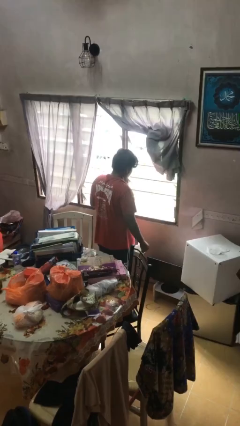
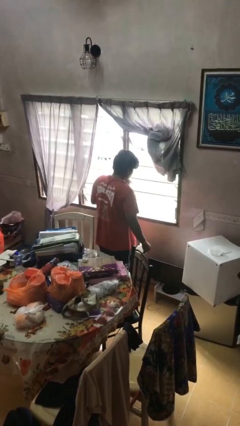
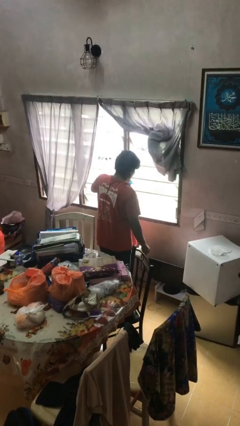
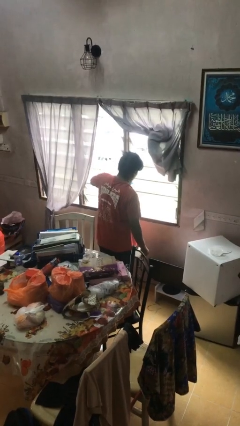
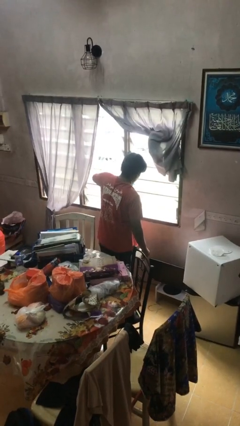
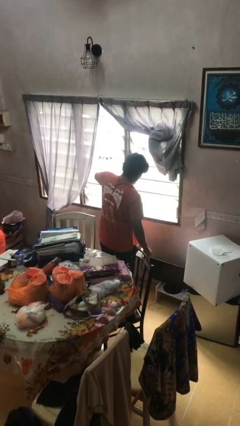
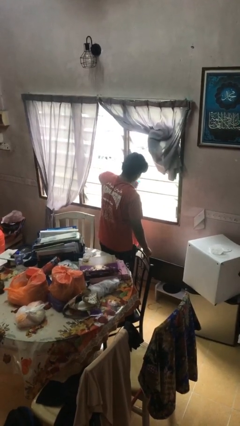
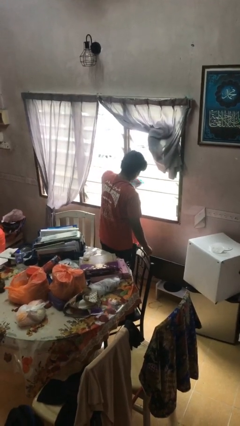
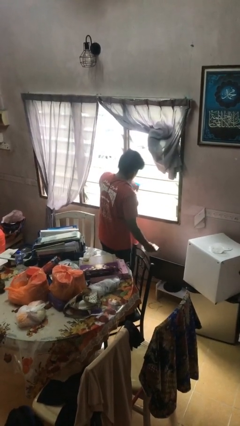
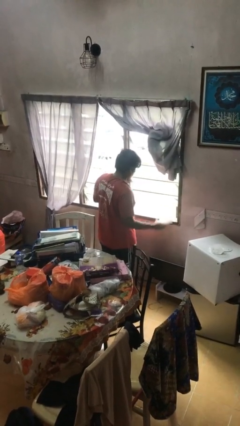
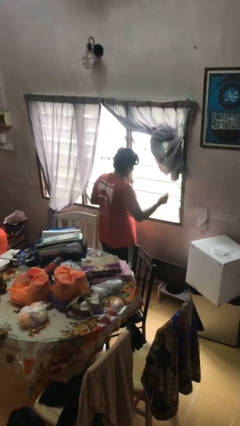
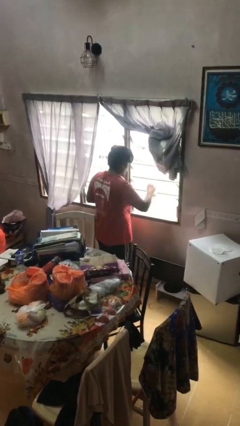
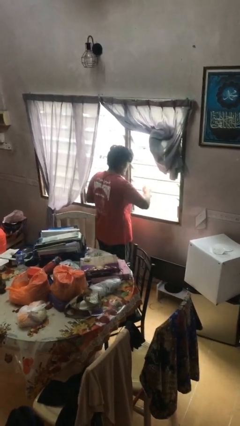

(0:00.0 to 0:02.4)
person sprays from bottle

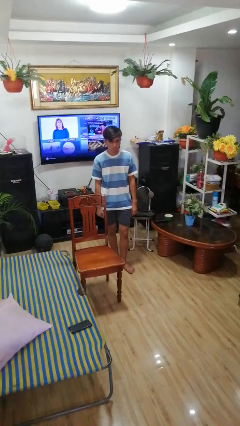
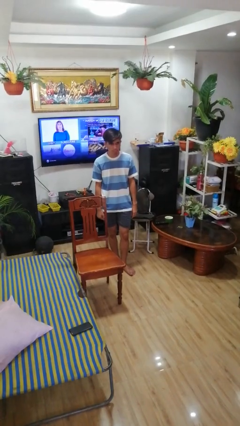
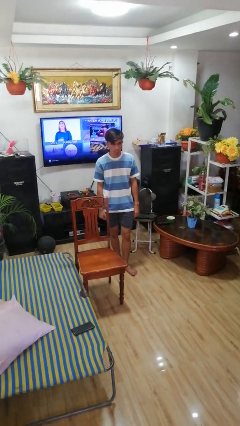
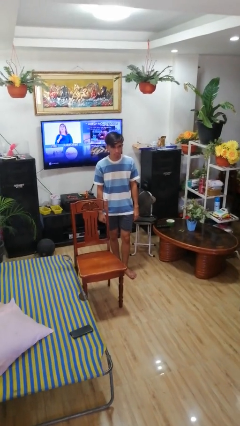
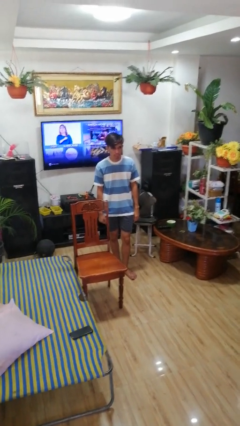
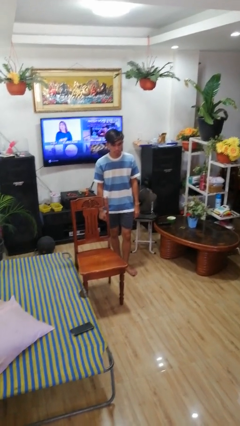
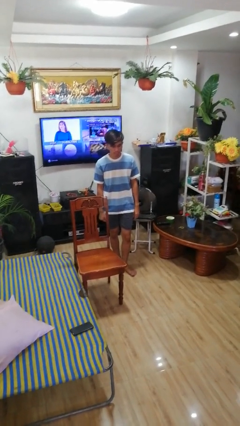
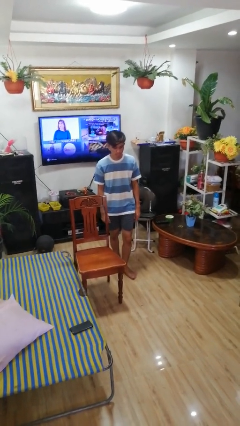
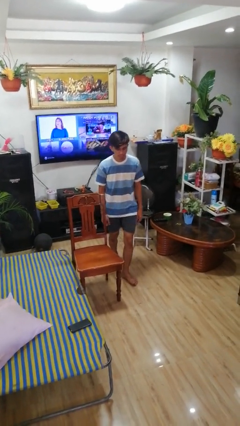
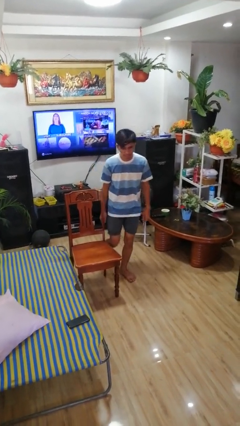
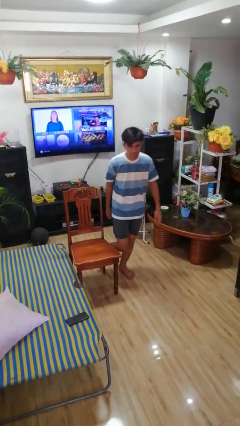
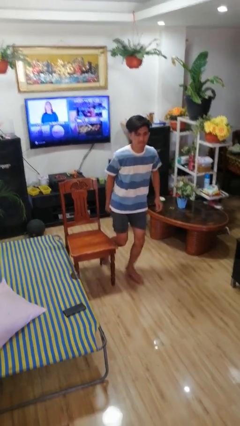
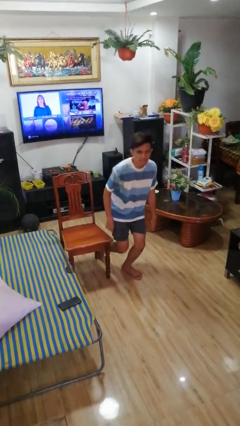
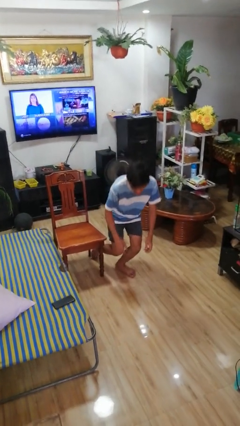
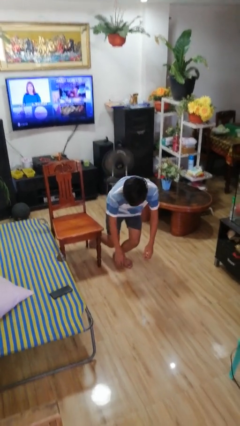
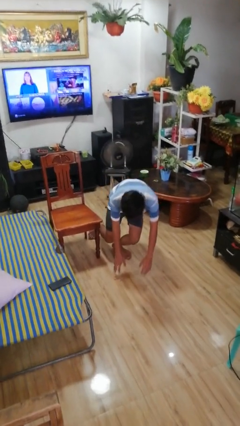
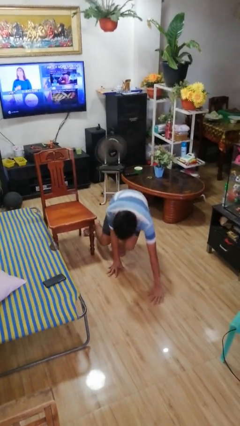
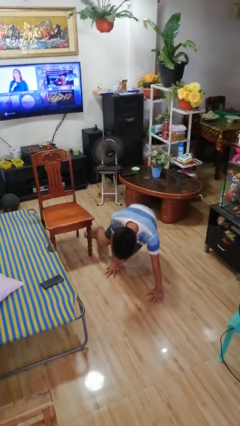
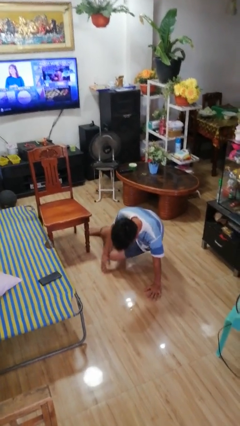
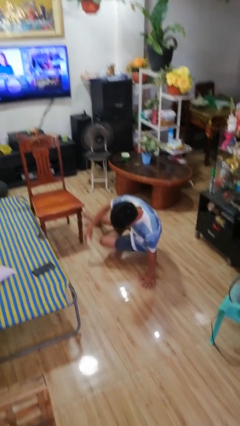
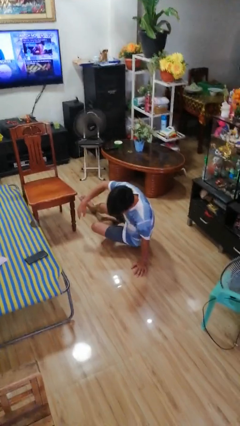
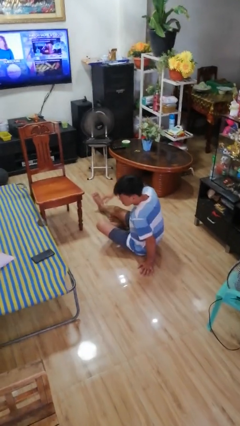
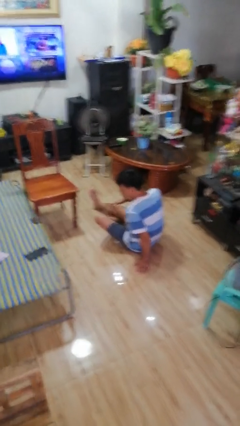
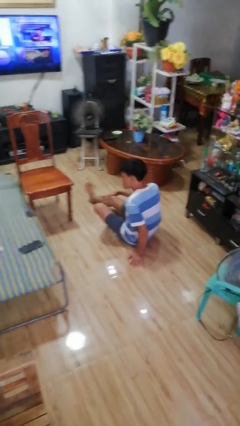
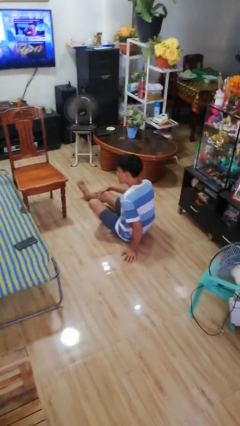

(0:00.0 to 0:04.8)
person trips on object on floor

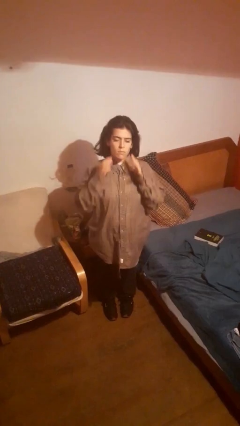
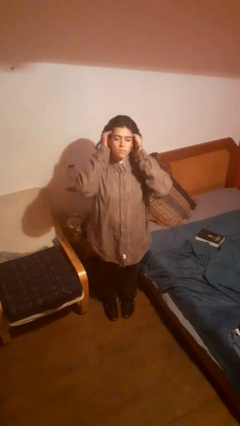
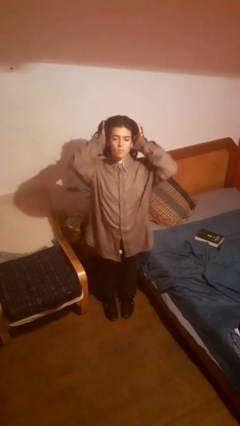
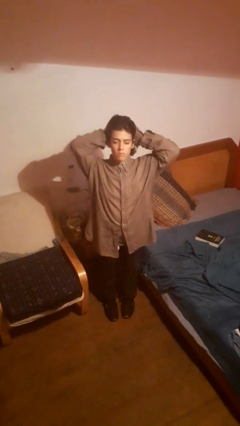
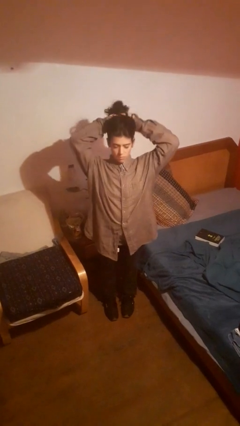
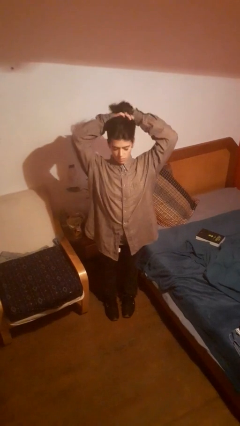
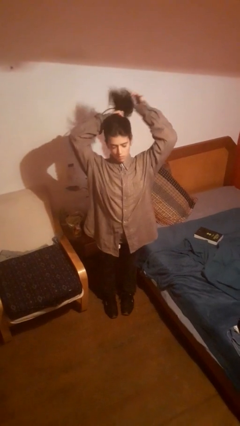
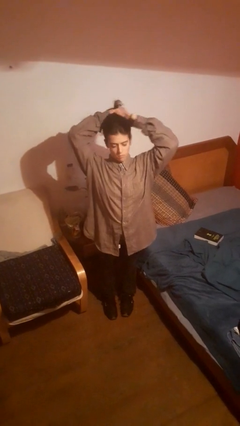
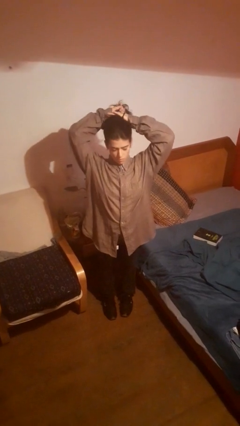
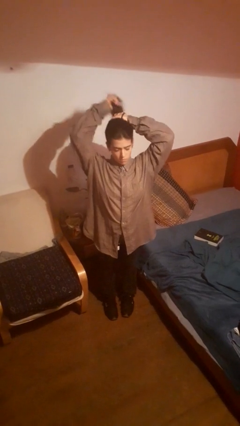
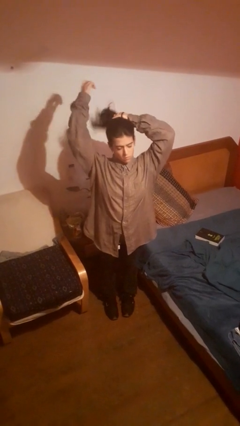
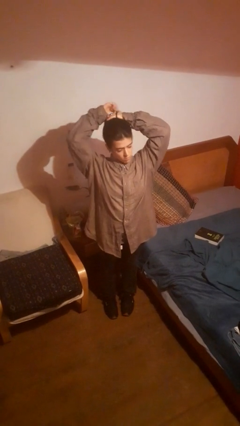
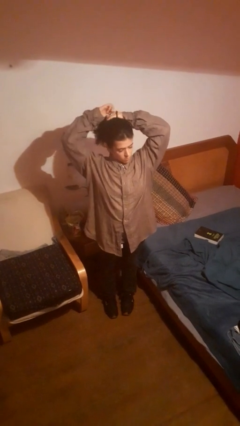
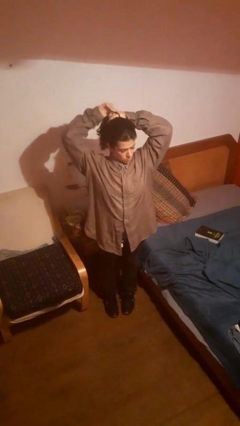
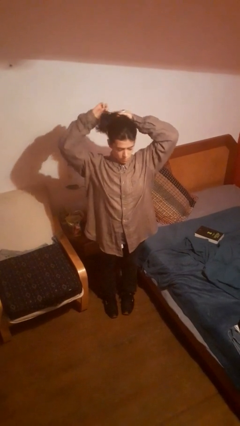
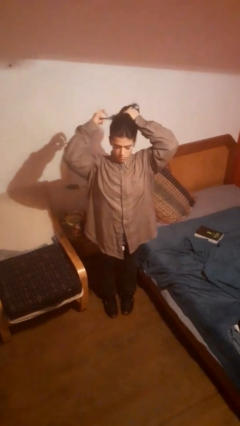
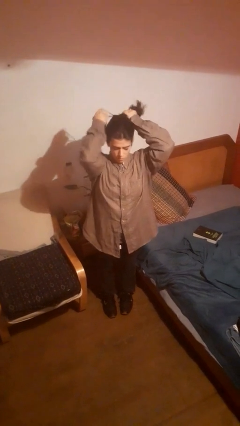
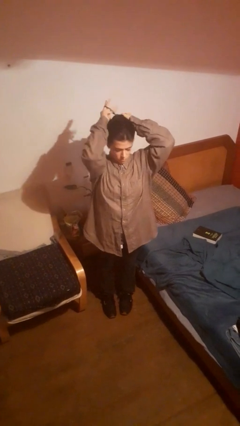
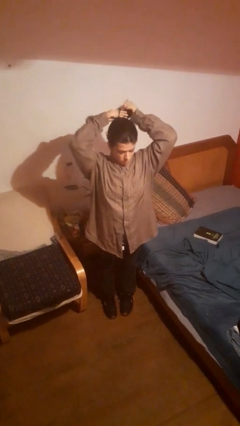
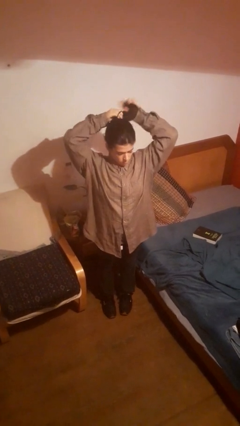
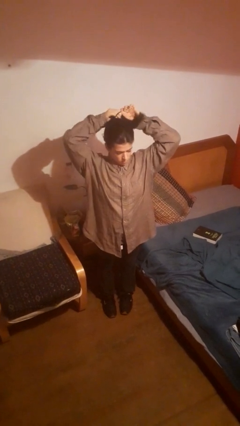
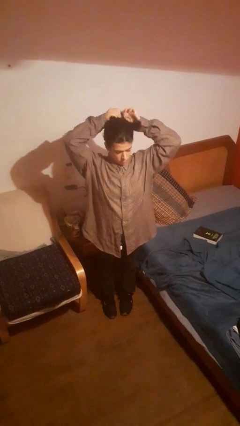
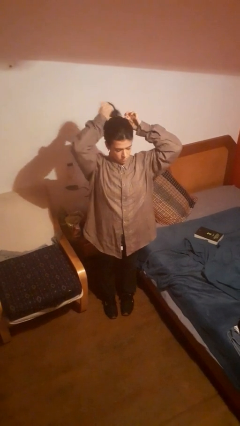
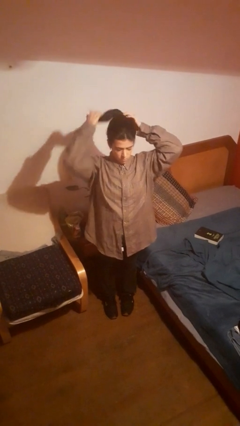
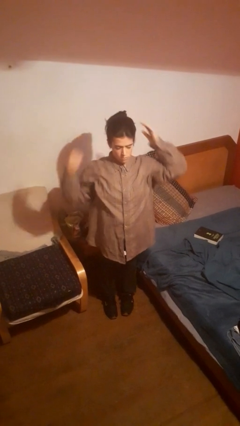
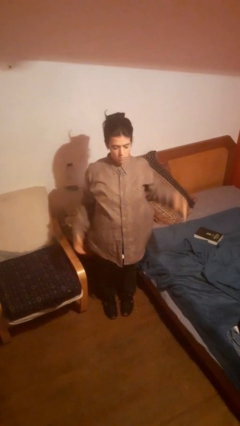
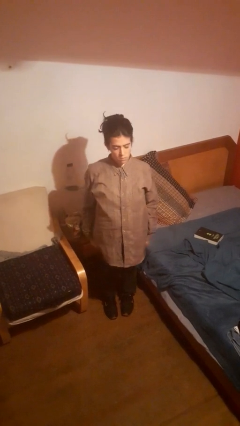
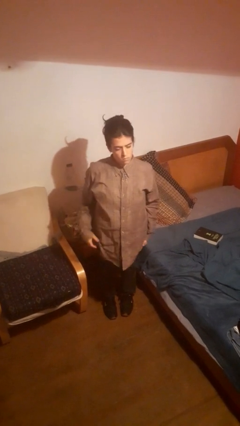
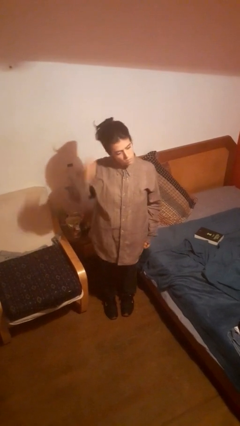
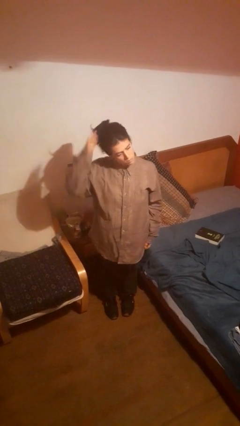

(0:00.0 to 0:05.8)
person puts hair in ponytail

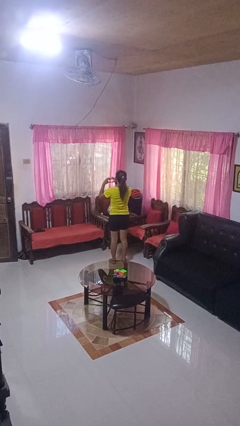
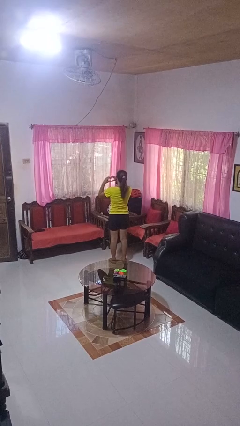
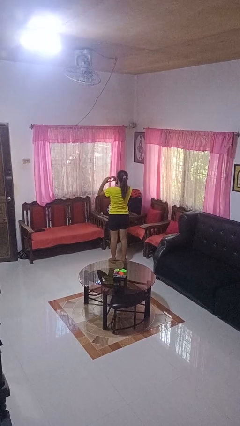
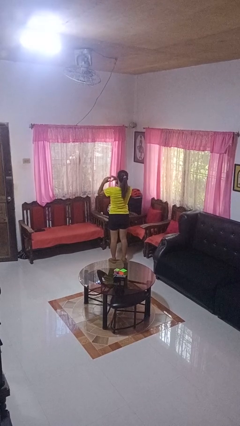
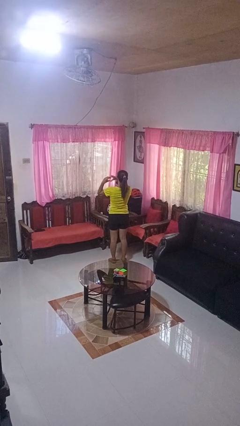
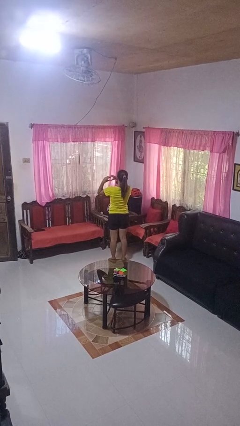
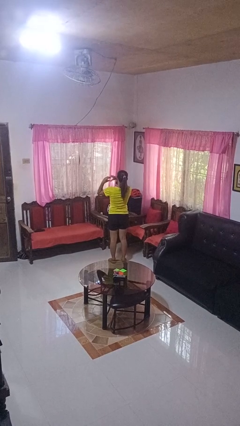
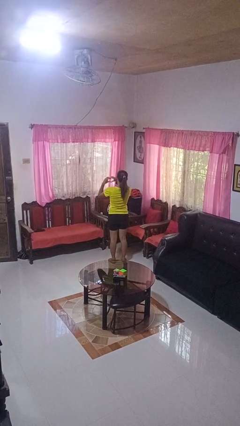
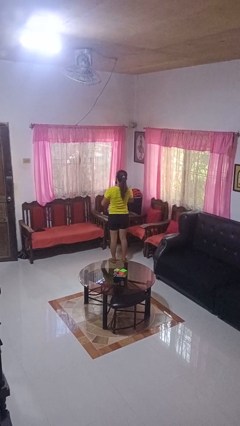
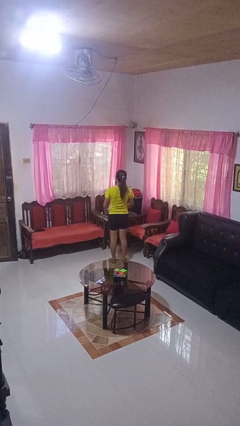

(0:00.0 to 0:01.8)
person gestures heart

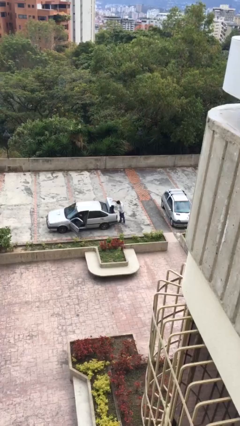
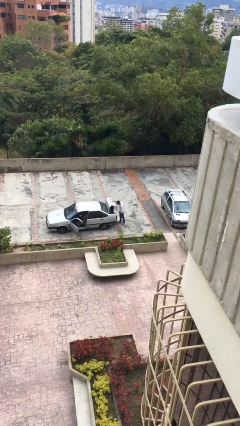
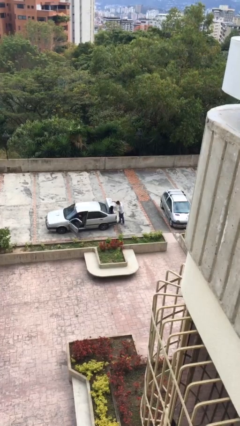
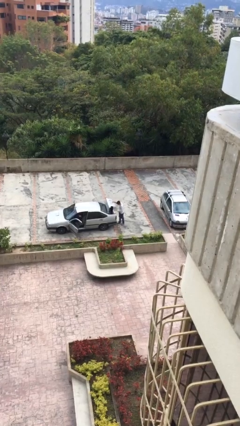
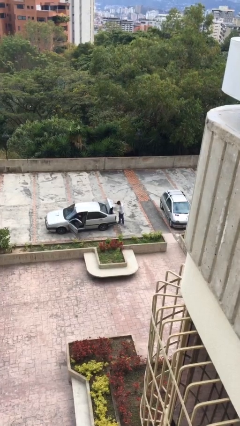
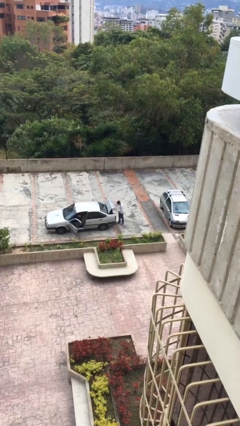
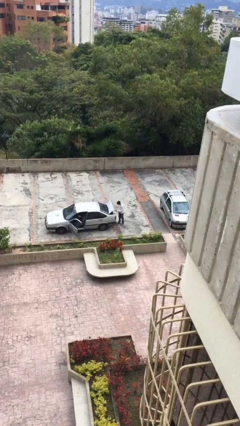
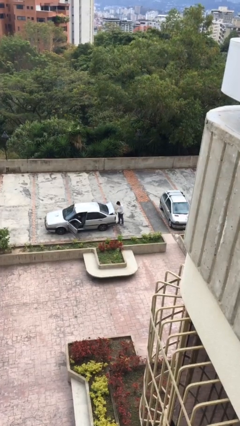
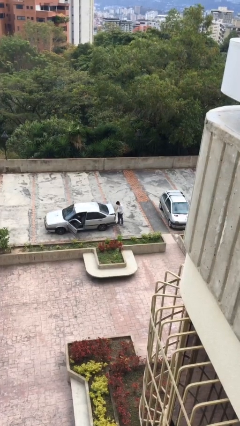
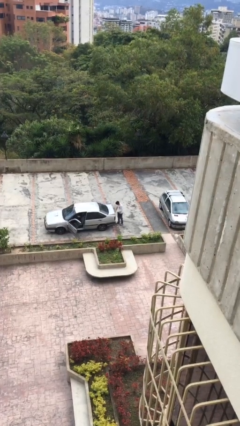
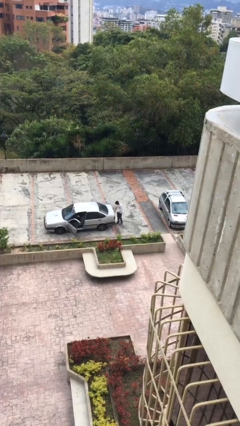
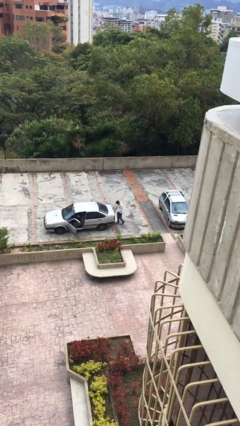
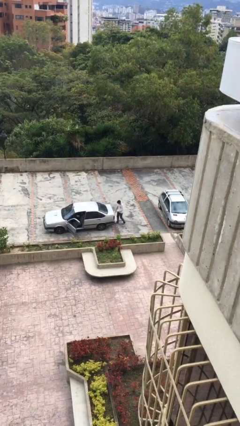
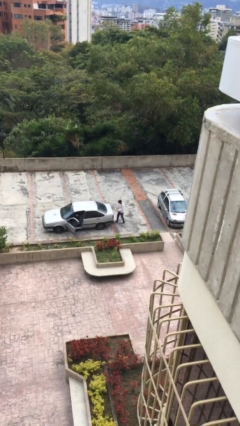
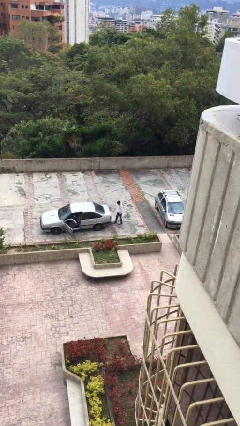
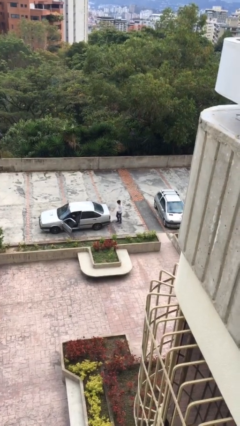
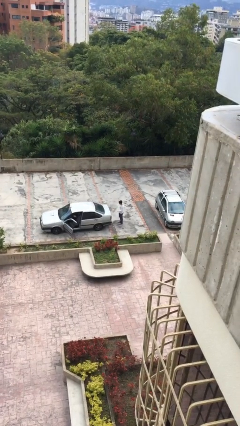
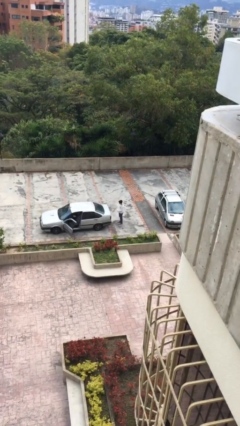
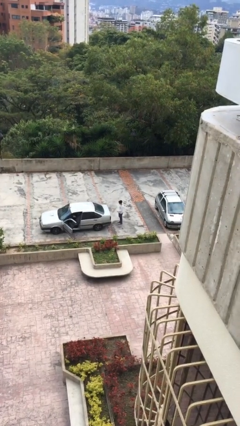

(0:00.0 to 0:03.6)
person closes car trunk
